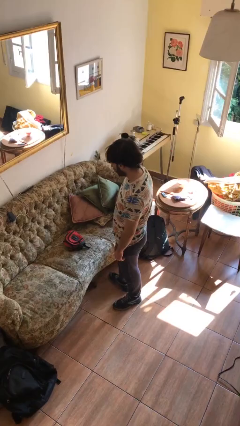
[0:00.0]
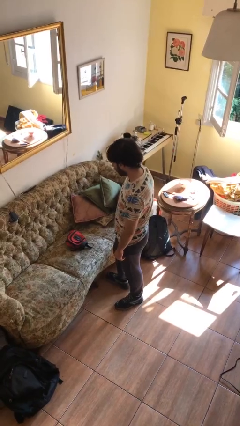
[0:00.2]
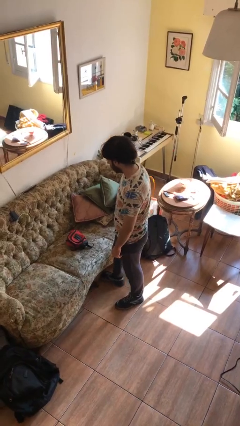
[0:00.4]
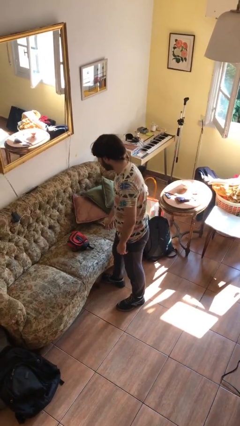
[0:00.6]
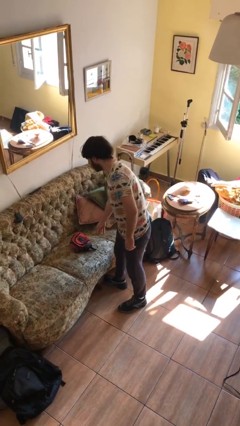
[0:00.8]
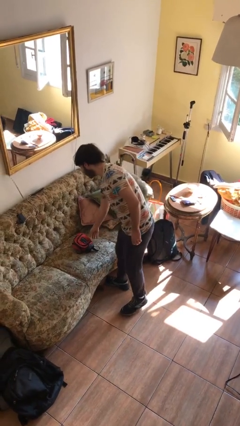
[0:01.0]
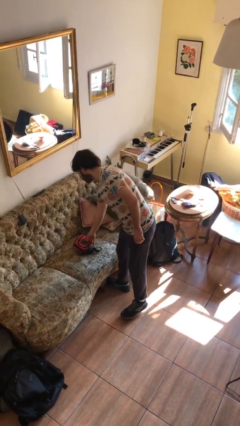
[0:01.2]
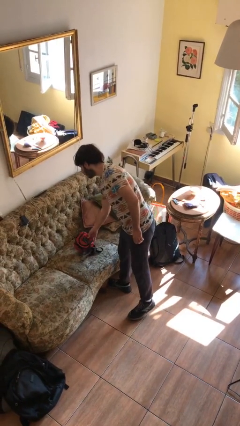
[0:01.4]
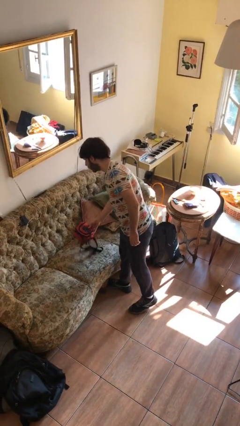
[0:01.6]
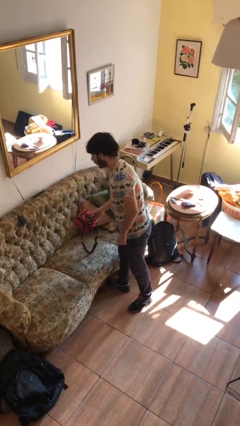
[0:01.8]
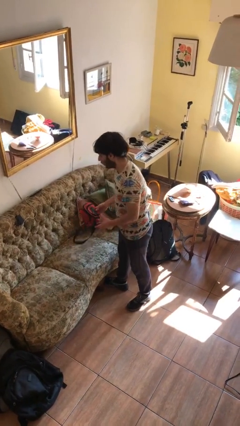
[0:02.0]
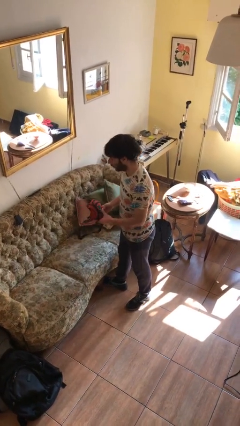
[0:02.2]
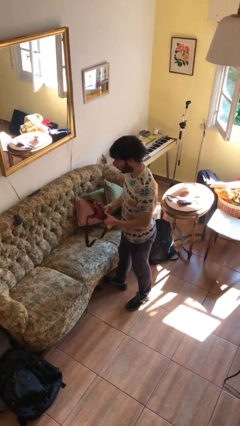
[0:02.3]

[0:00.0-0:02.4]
person picks up object from couch

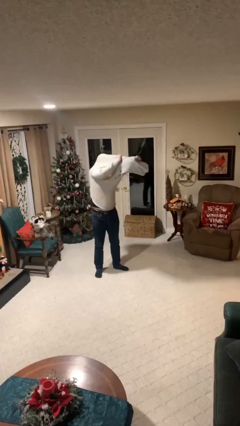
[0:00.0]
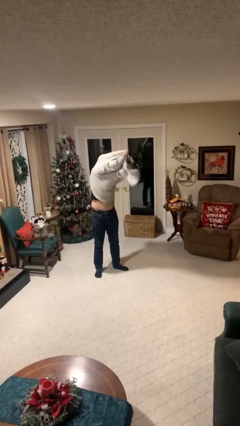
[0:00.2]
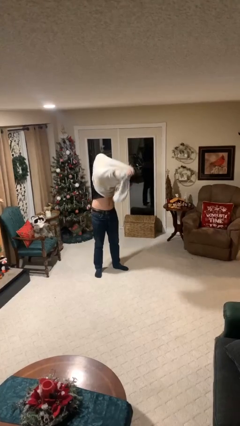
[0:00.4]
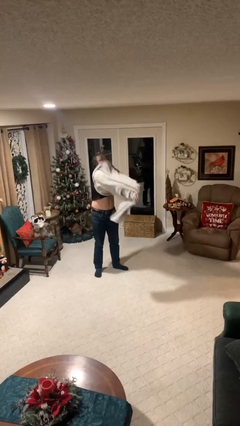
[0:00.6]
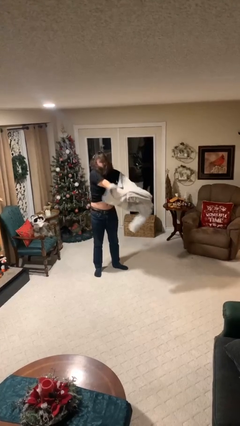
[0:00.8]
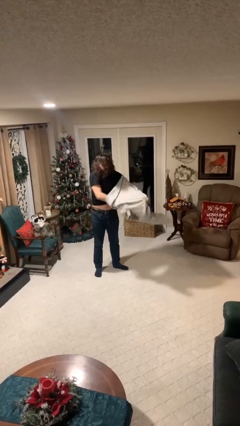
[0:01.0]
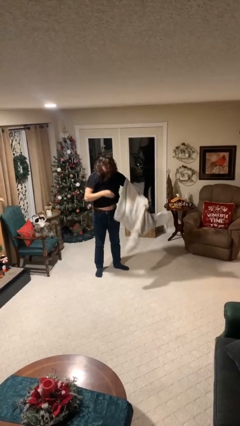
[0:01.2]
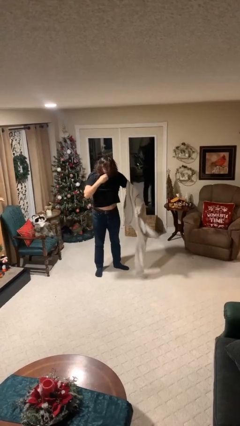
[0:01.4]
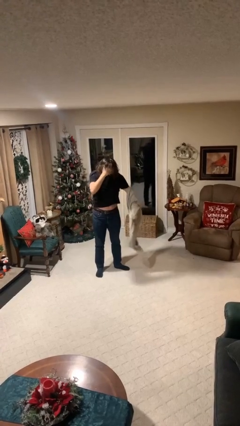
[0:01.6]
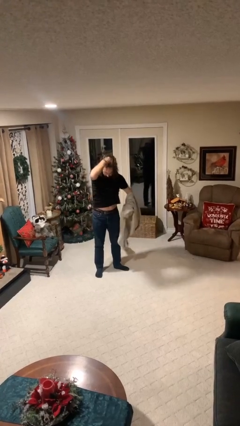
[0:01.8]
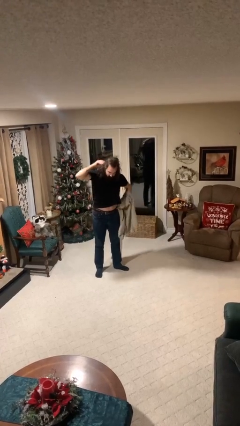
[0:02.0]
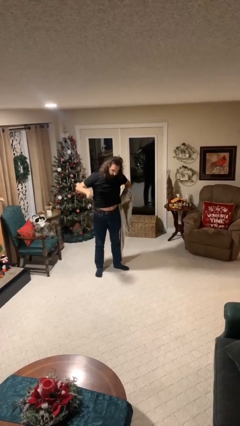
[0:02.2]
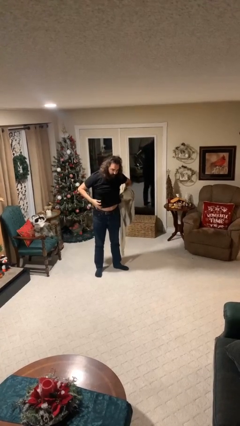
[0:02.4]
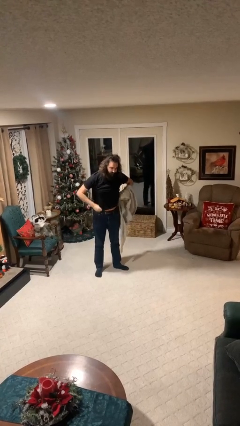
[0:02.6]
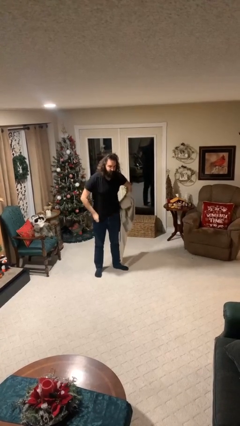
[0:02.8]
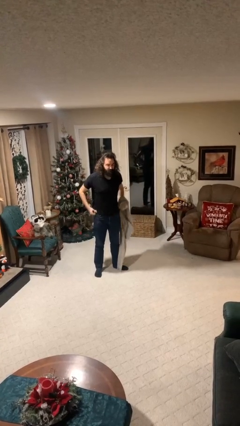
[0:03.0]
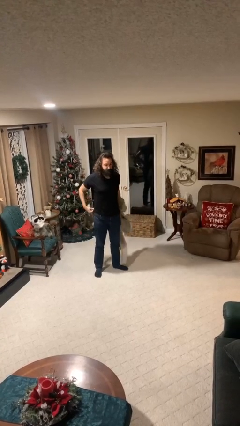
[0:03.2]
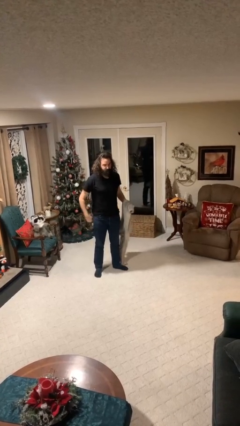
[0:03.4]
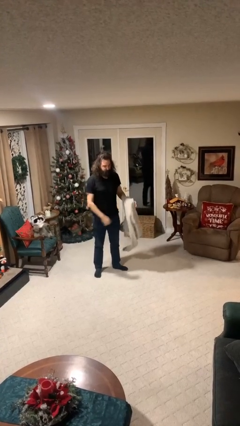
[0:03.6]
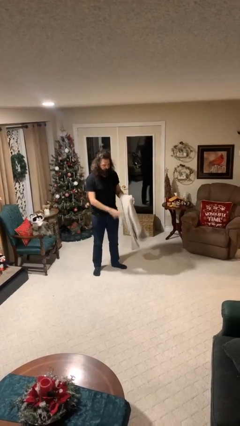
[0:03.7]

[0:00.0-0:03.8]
person takes off hoodie

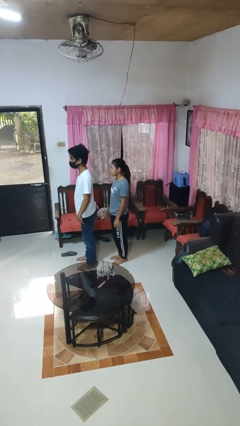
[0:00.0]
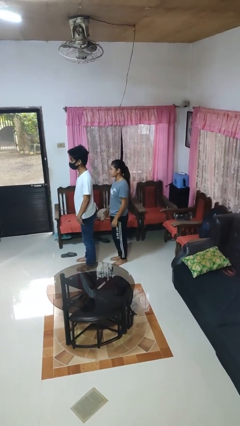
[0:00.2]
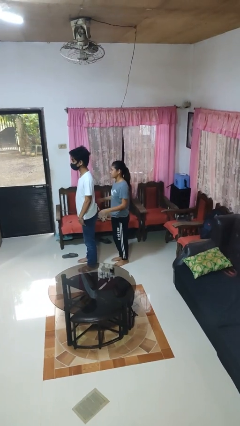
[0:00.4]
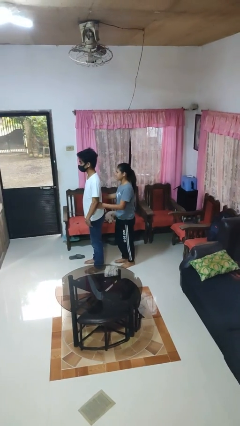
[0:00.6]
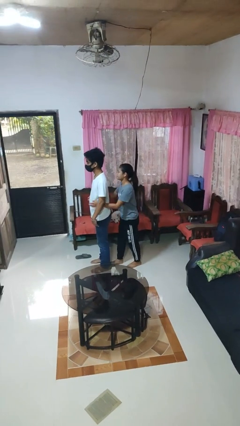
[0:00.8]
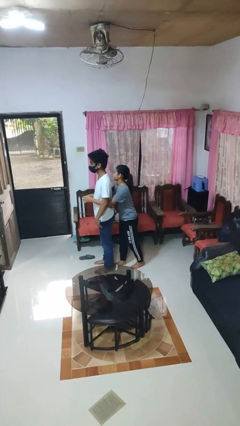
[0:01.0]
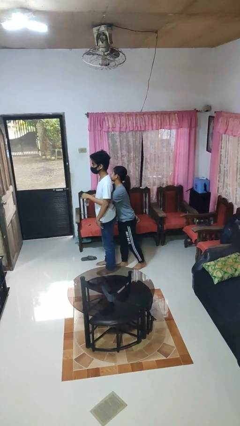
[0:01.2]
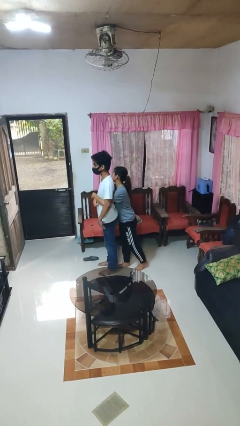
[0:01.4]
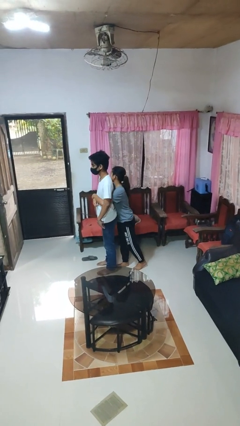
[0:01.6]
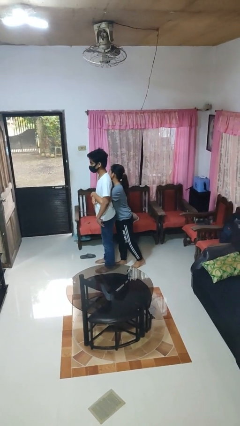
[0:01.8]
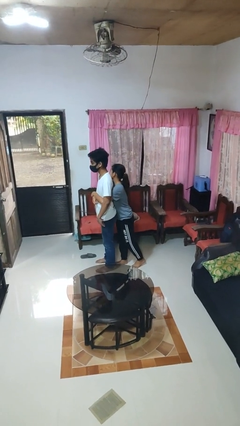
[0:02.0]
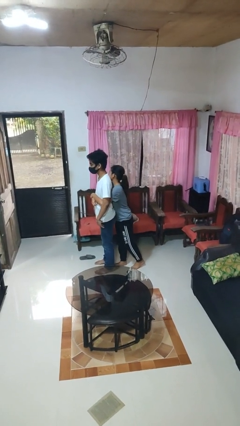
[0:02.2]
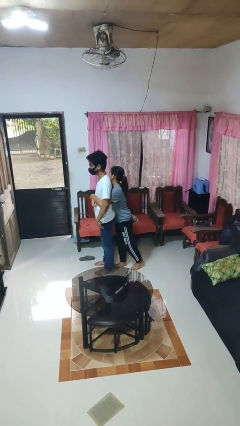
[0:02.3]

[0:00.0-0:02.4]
person hugs person from behind

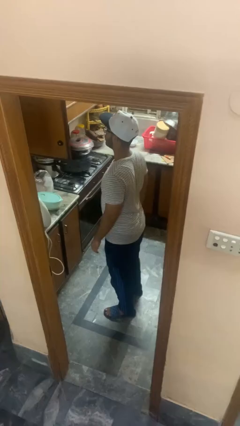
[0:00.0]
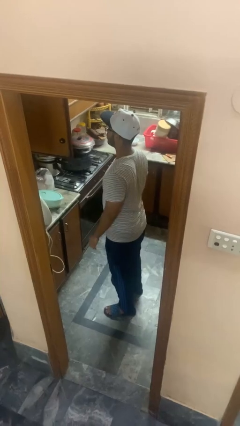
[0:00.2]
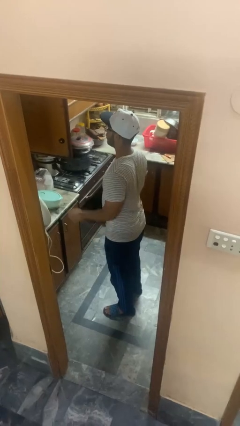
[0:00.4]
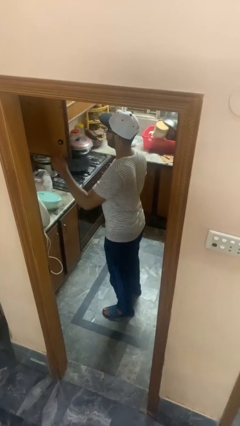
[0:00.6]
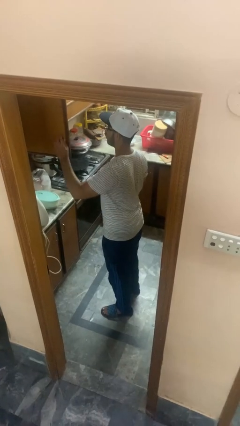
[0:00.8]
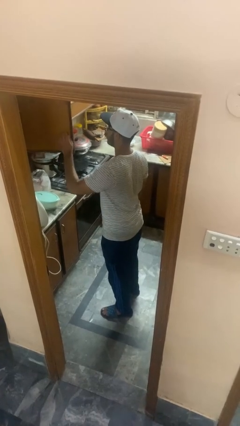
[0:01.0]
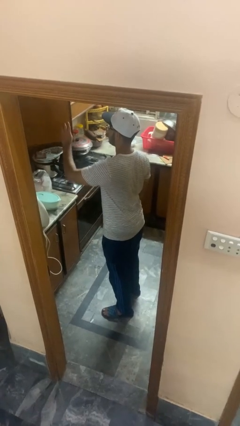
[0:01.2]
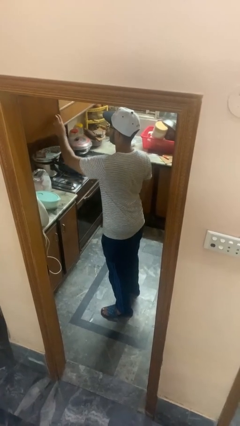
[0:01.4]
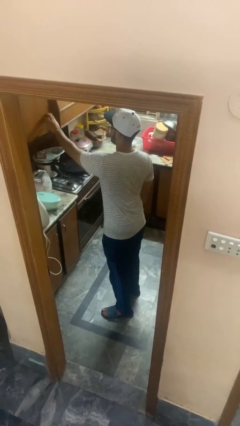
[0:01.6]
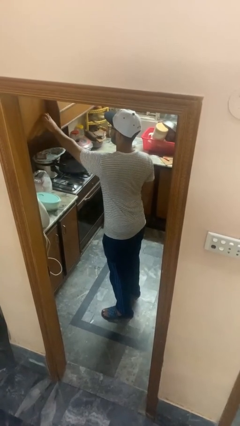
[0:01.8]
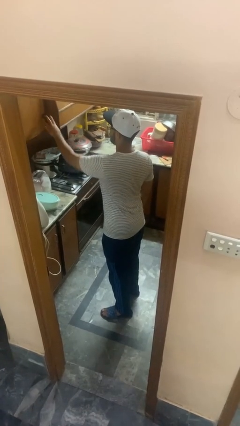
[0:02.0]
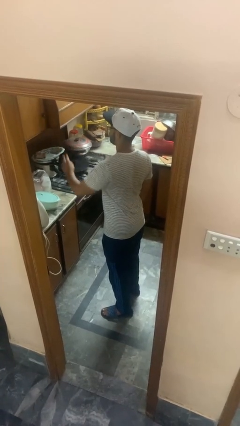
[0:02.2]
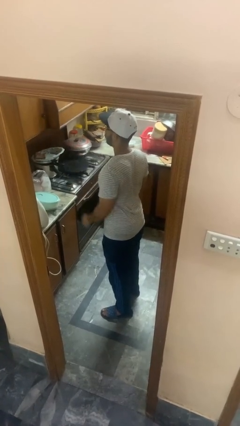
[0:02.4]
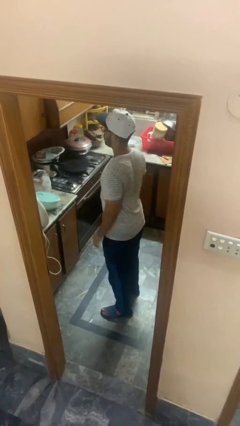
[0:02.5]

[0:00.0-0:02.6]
person closes kitchen drawer

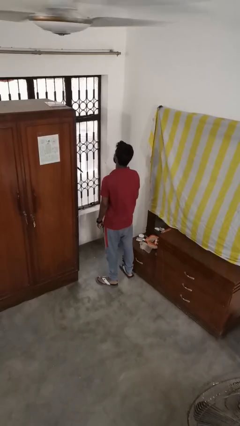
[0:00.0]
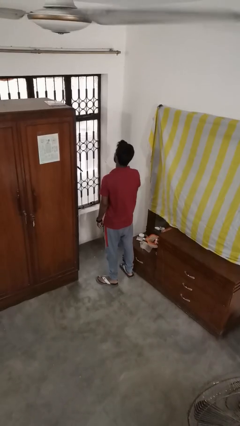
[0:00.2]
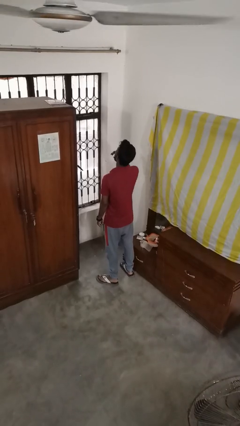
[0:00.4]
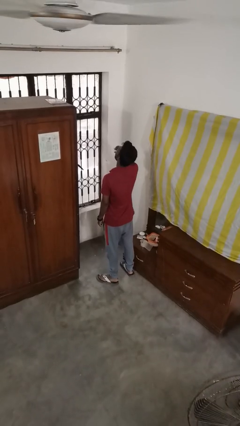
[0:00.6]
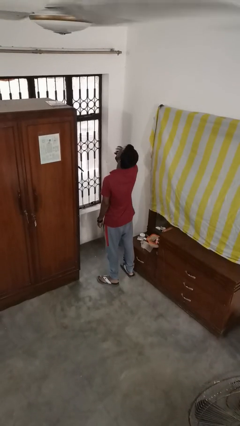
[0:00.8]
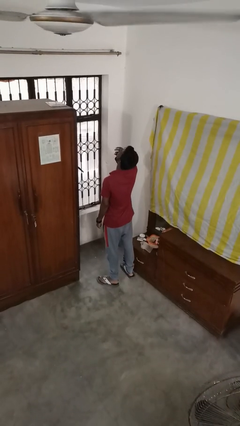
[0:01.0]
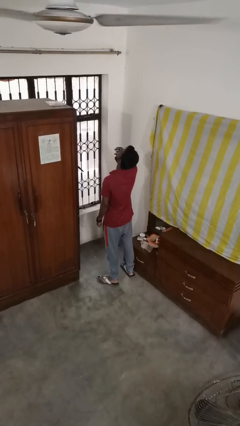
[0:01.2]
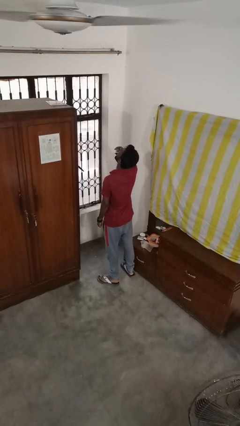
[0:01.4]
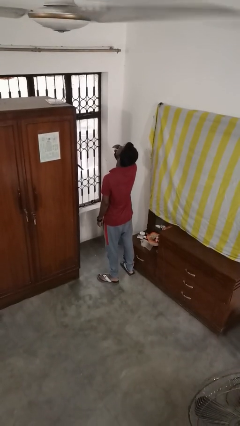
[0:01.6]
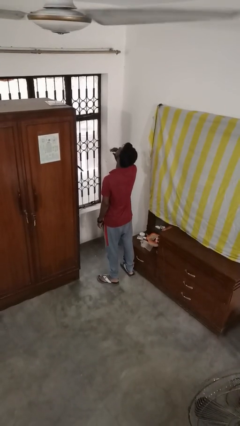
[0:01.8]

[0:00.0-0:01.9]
person yawns

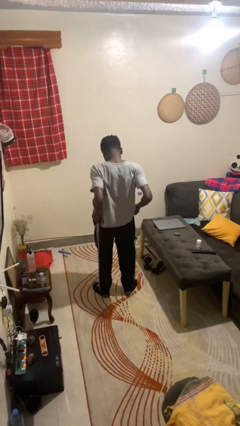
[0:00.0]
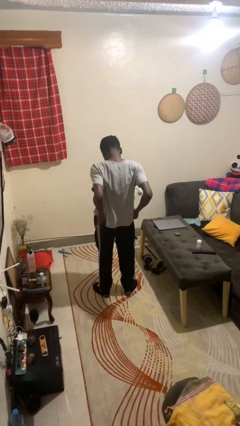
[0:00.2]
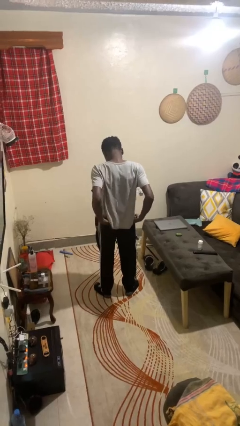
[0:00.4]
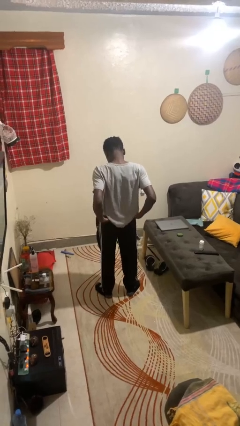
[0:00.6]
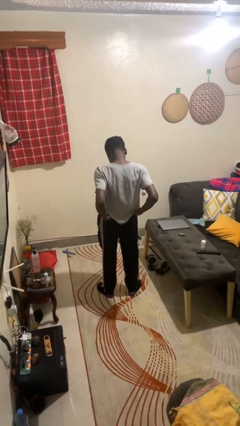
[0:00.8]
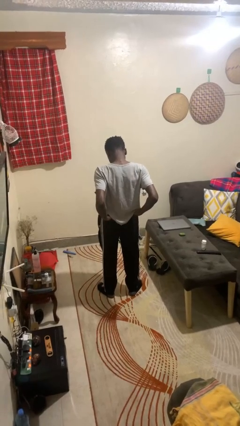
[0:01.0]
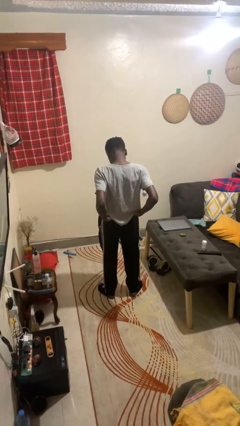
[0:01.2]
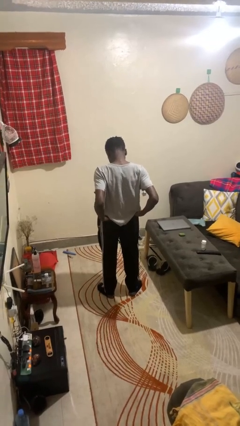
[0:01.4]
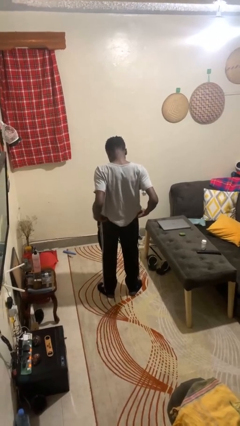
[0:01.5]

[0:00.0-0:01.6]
person puts hands in back pockets

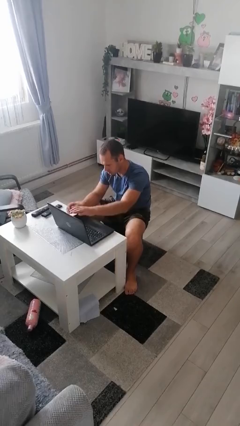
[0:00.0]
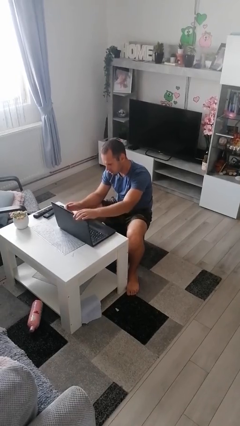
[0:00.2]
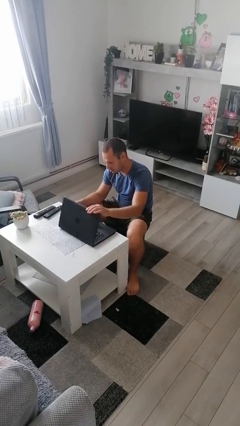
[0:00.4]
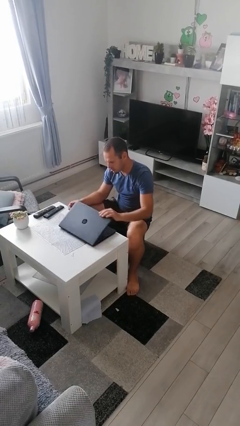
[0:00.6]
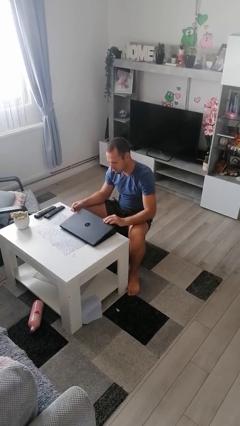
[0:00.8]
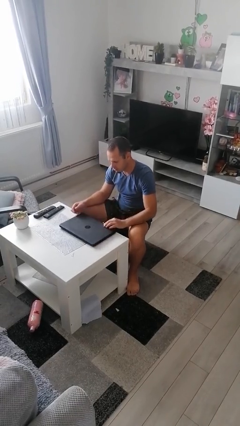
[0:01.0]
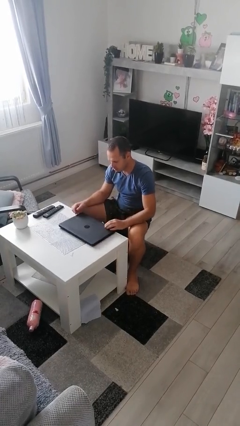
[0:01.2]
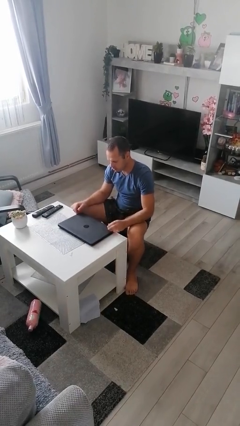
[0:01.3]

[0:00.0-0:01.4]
person closes laptop

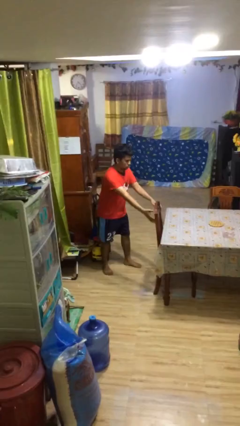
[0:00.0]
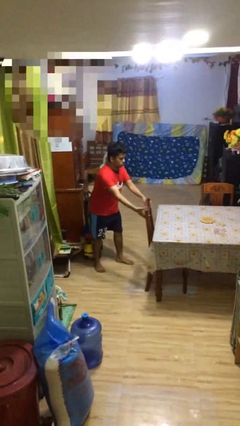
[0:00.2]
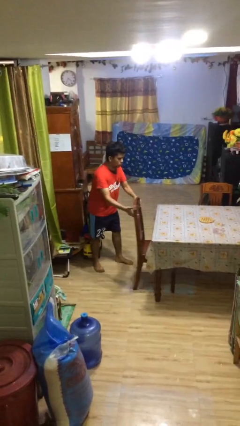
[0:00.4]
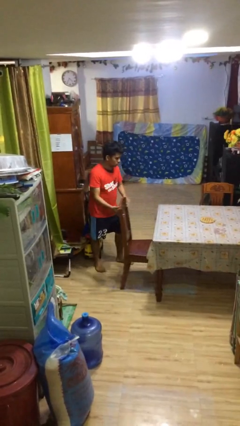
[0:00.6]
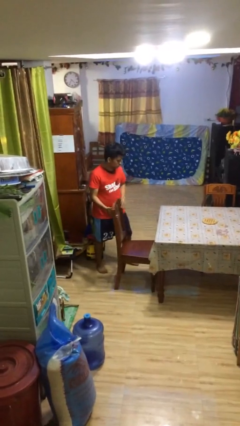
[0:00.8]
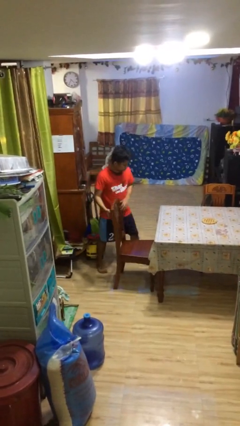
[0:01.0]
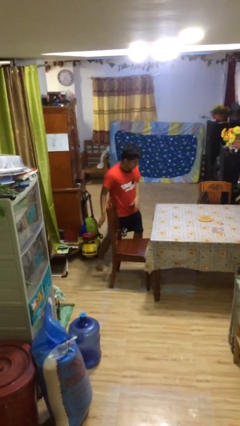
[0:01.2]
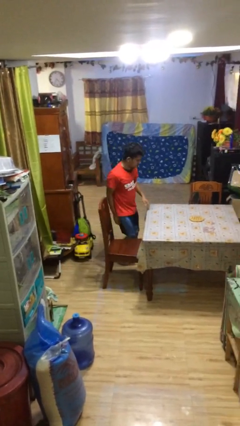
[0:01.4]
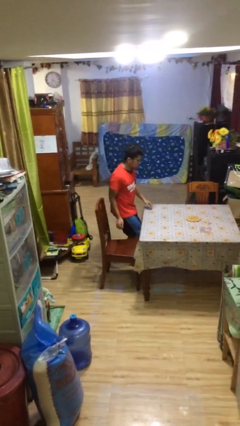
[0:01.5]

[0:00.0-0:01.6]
person stands up
